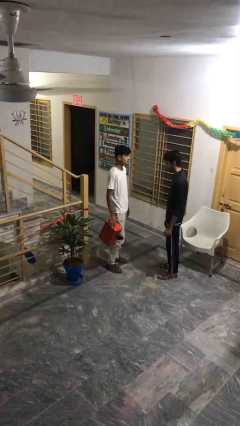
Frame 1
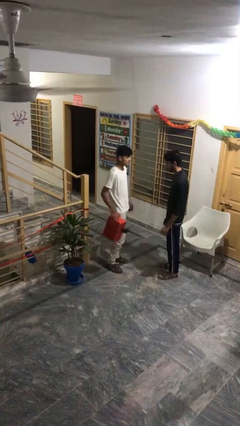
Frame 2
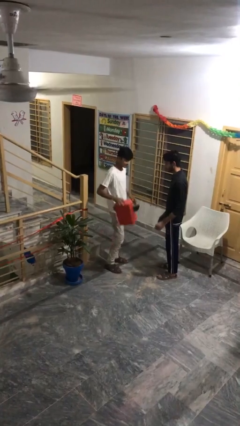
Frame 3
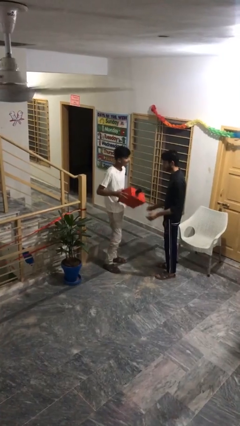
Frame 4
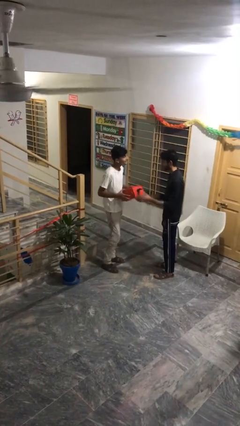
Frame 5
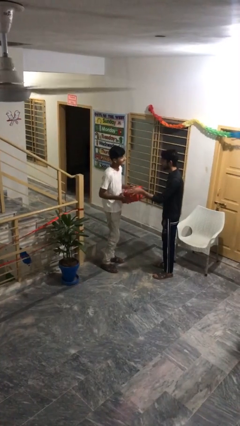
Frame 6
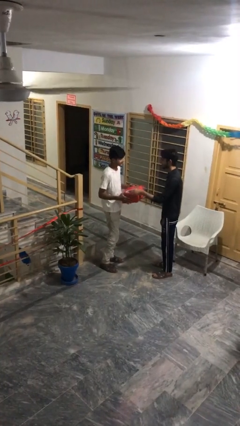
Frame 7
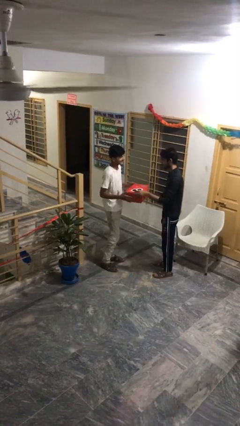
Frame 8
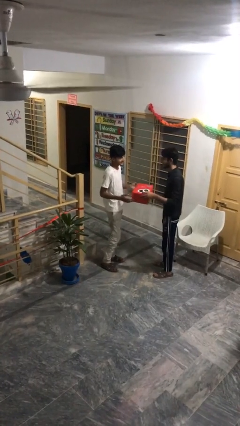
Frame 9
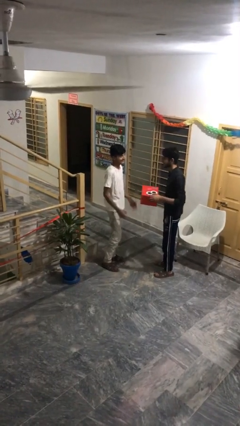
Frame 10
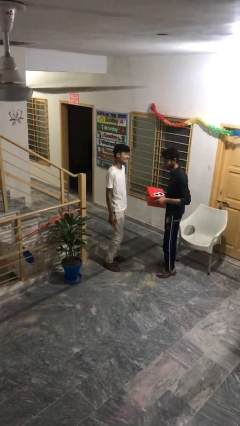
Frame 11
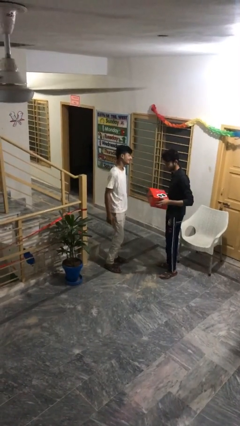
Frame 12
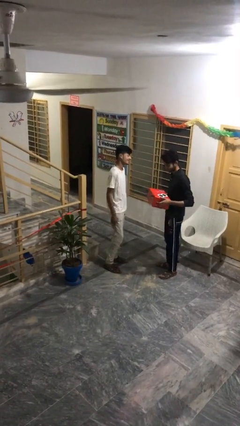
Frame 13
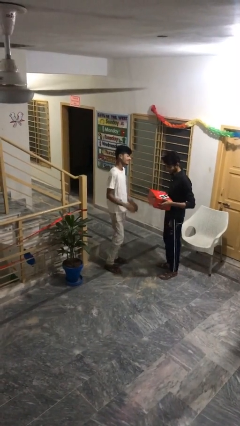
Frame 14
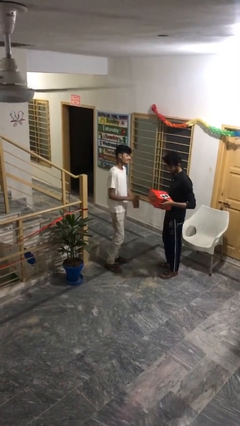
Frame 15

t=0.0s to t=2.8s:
person transfers object to person

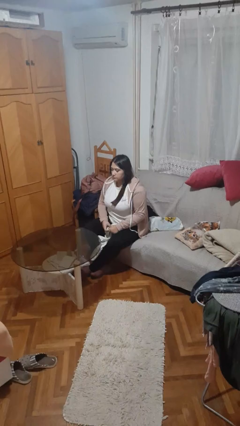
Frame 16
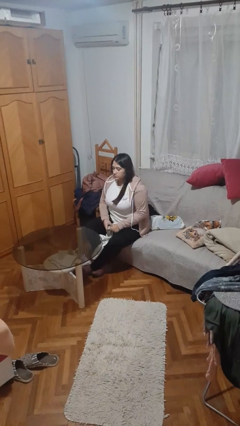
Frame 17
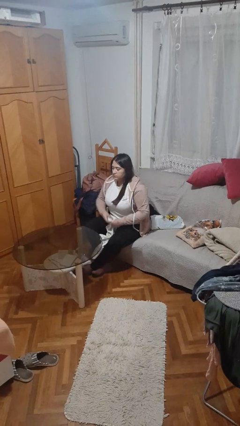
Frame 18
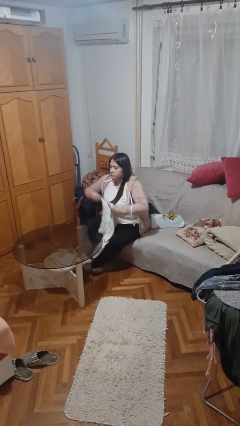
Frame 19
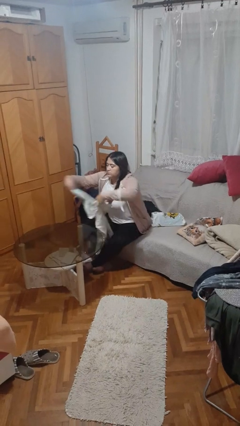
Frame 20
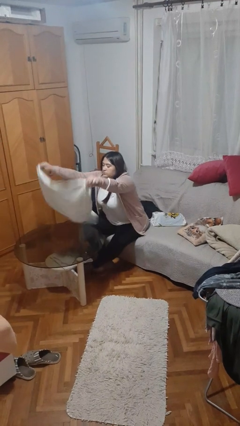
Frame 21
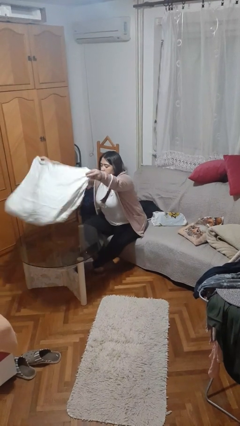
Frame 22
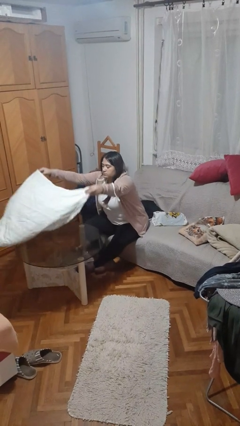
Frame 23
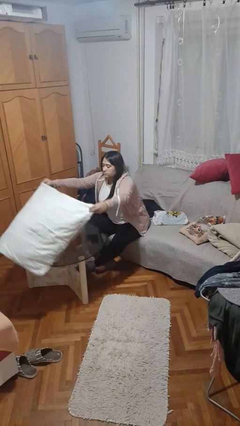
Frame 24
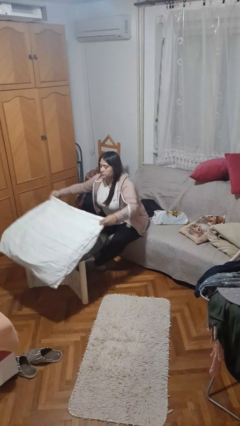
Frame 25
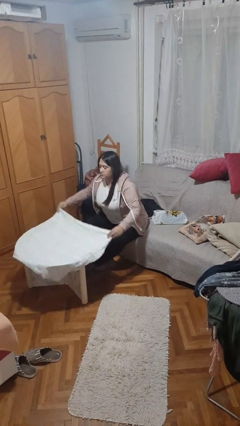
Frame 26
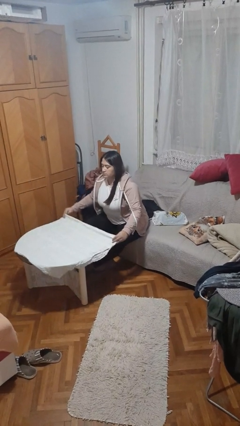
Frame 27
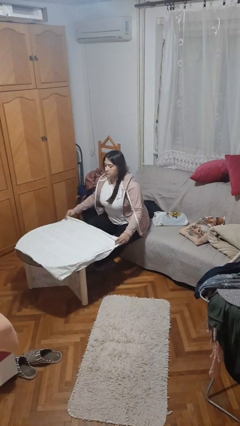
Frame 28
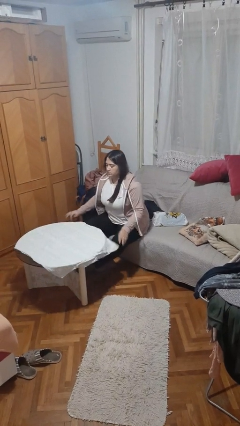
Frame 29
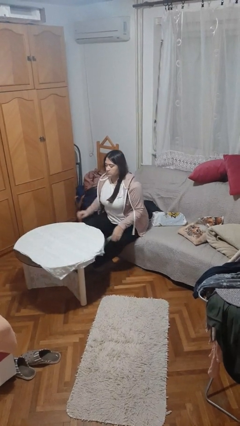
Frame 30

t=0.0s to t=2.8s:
person spreads tablecloth

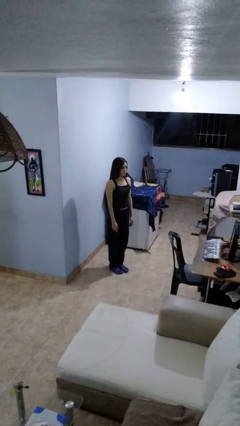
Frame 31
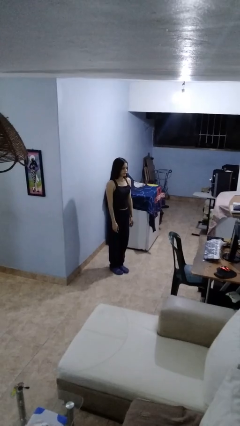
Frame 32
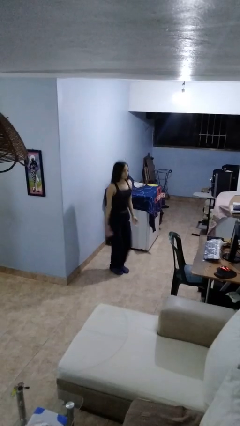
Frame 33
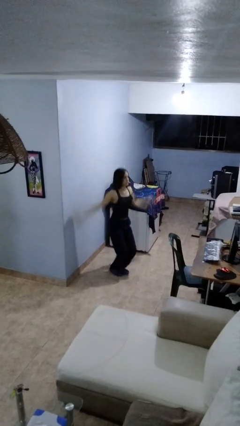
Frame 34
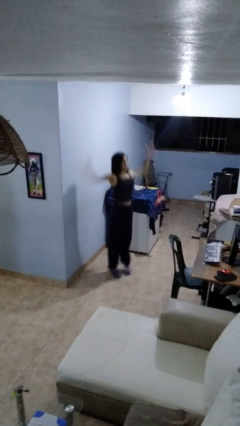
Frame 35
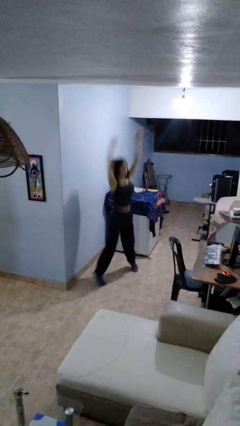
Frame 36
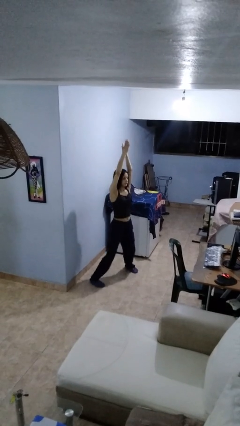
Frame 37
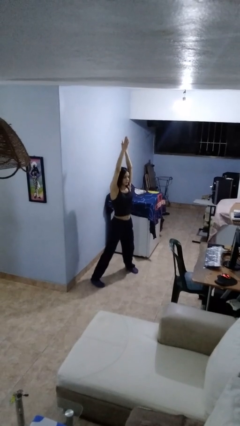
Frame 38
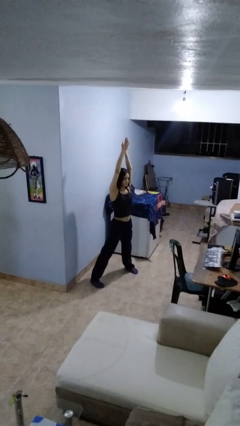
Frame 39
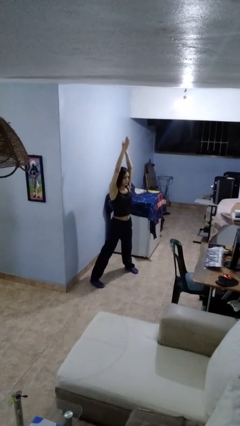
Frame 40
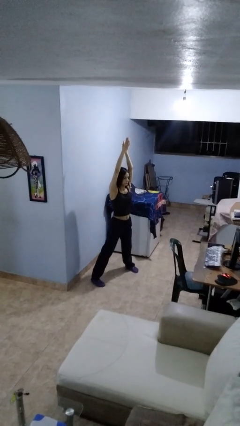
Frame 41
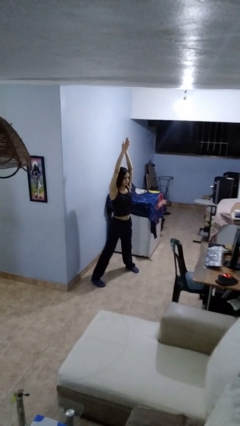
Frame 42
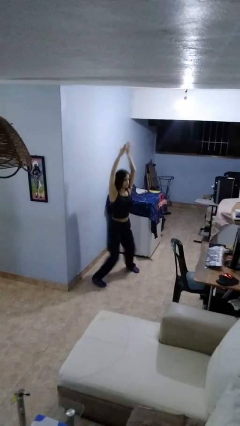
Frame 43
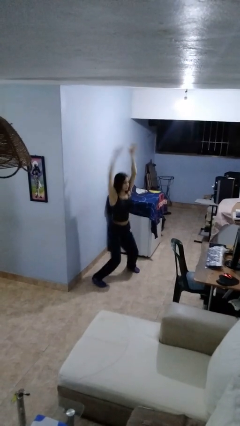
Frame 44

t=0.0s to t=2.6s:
person exercises with jumping jacks

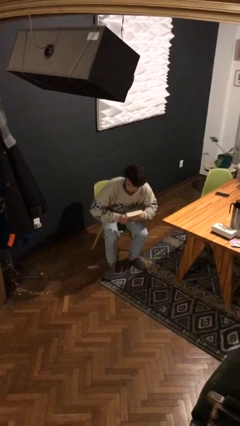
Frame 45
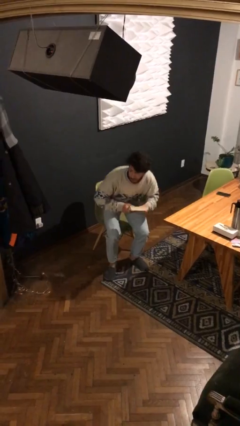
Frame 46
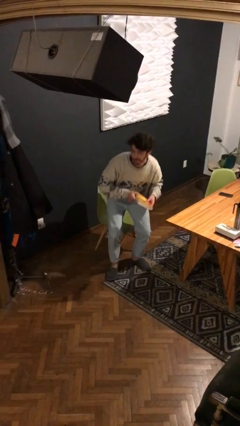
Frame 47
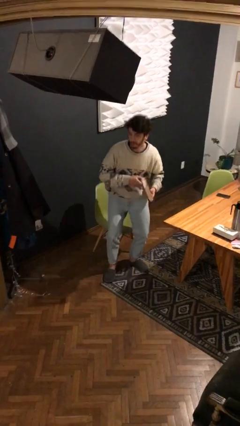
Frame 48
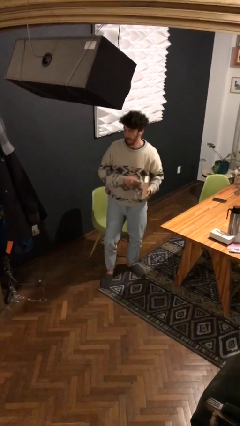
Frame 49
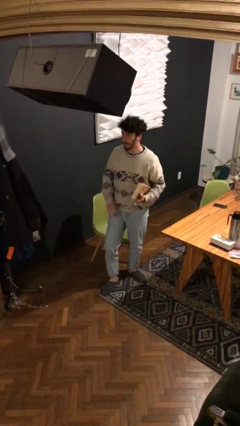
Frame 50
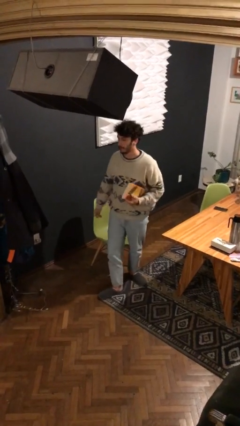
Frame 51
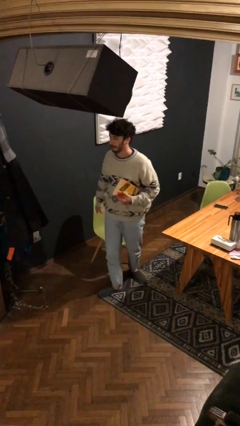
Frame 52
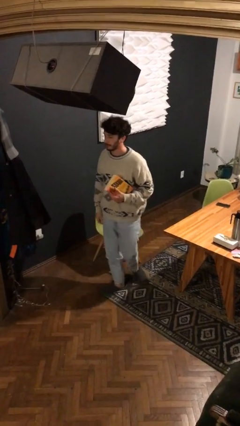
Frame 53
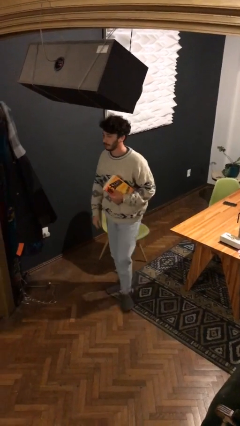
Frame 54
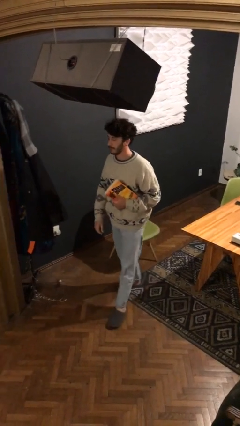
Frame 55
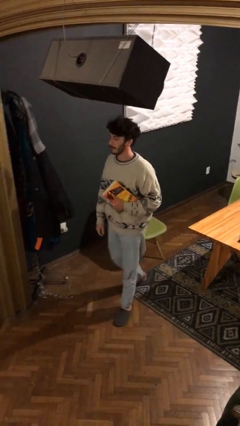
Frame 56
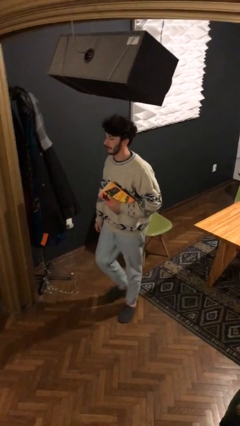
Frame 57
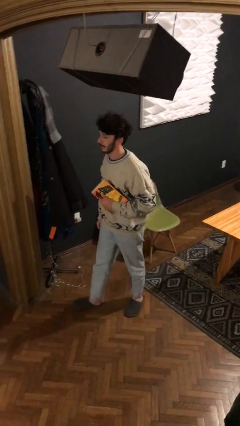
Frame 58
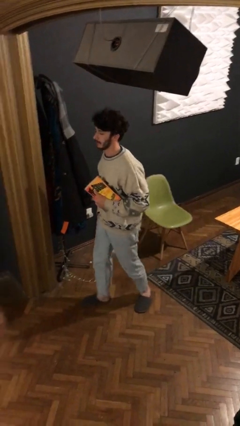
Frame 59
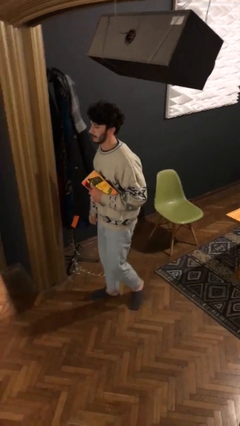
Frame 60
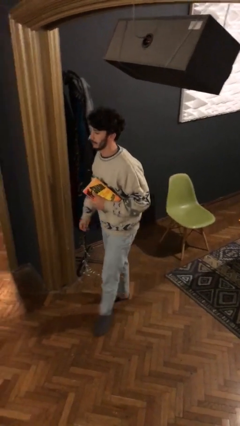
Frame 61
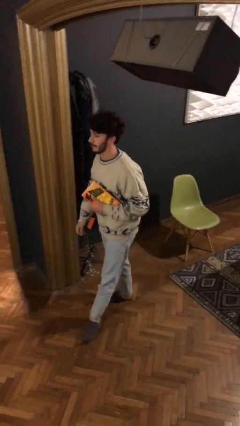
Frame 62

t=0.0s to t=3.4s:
person stands up

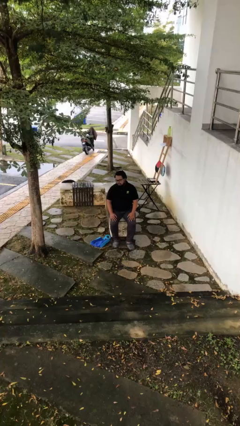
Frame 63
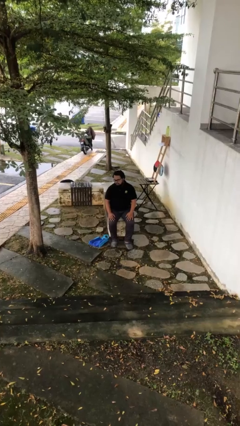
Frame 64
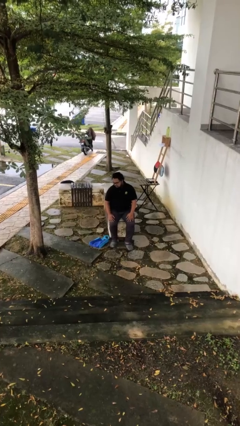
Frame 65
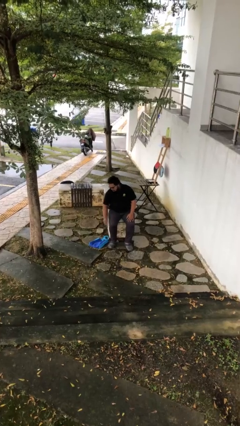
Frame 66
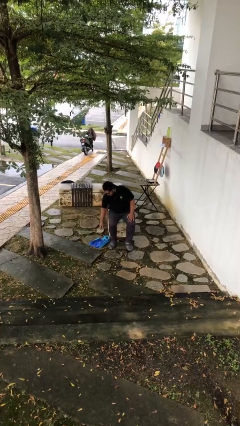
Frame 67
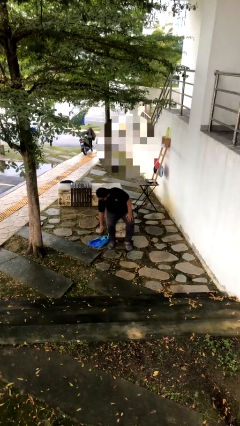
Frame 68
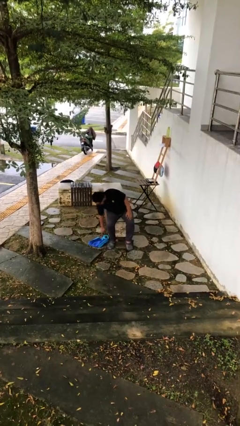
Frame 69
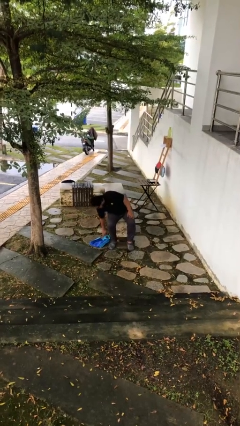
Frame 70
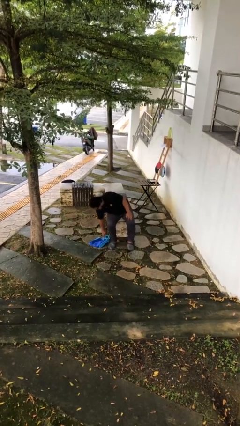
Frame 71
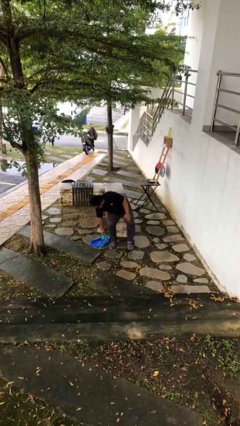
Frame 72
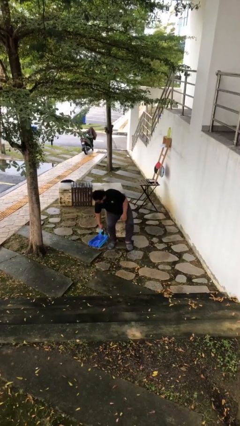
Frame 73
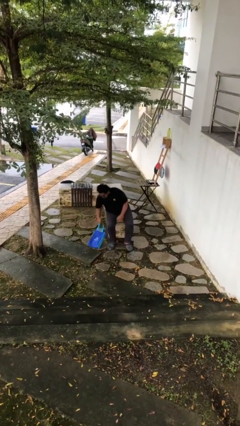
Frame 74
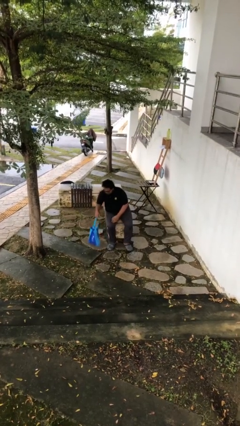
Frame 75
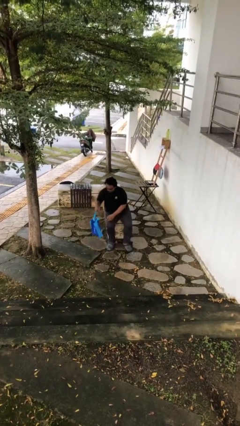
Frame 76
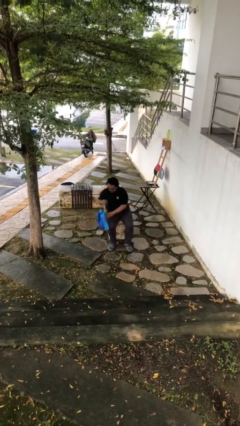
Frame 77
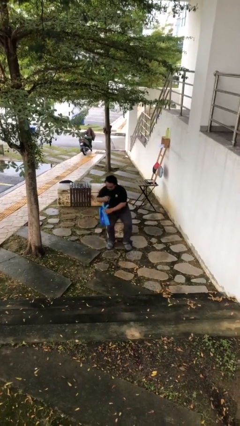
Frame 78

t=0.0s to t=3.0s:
person picks up object from floor

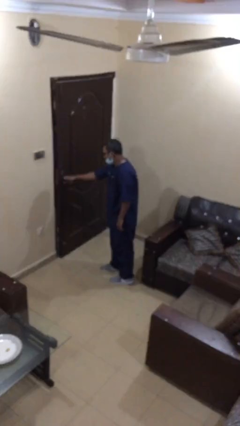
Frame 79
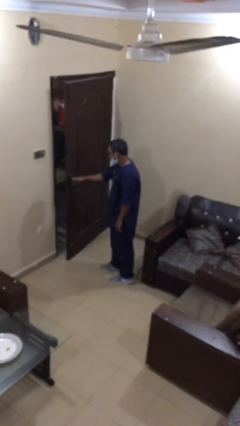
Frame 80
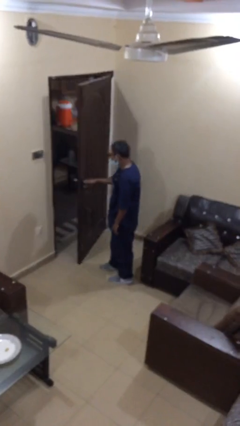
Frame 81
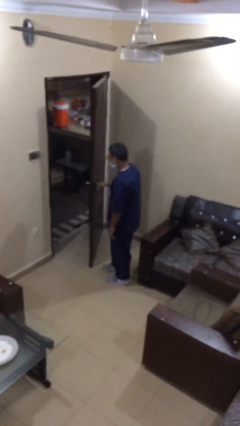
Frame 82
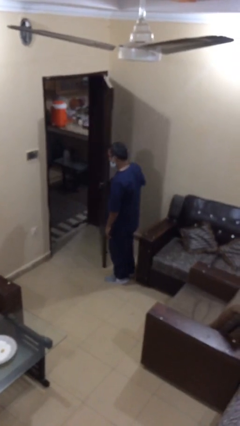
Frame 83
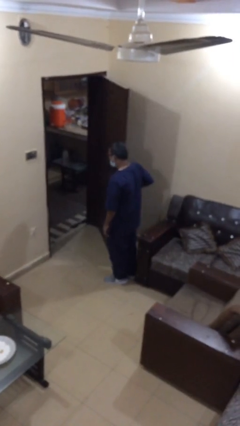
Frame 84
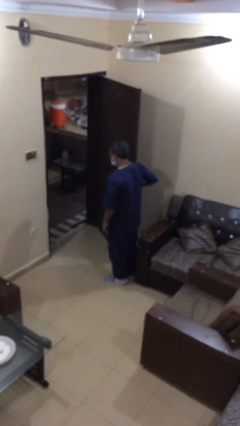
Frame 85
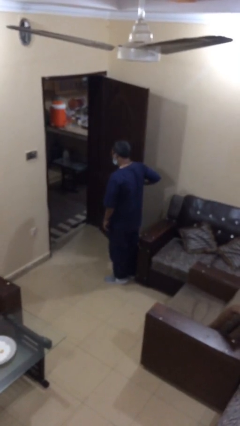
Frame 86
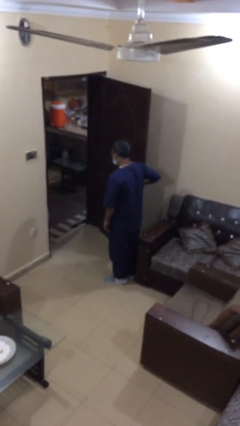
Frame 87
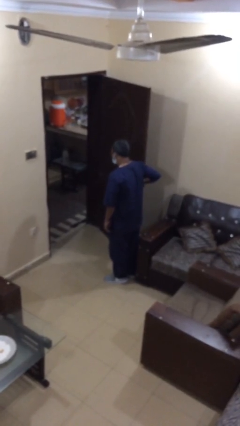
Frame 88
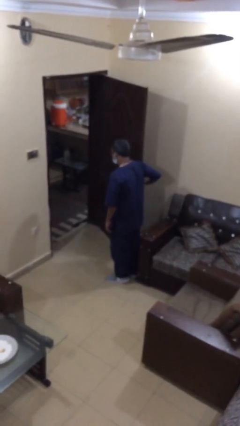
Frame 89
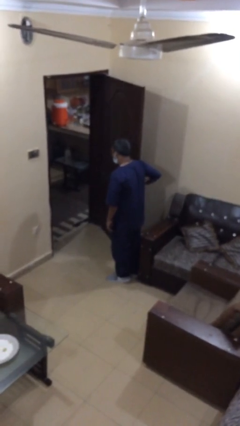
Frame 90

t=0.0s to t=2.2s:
person opens facility door

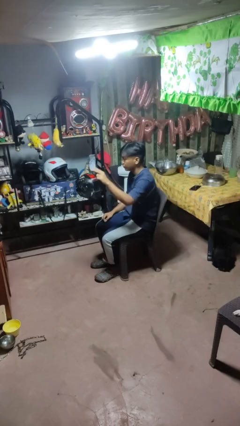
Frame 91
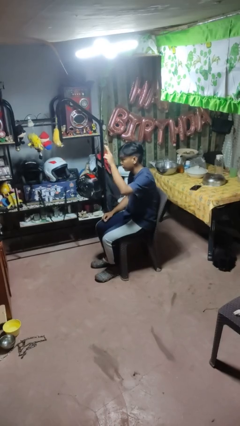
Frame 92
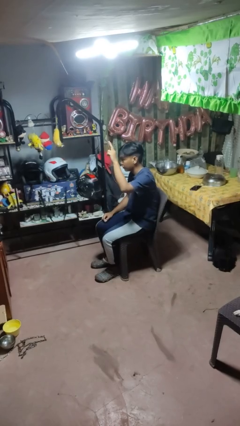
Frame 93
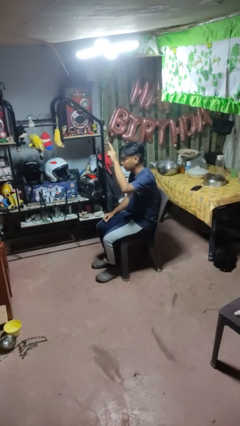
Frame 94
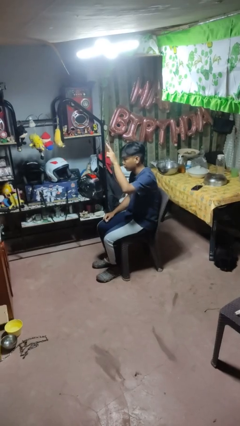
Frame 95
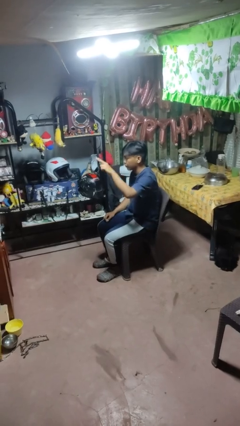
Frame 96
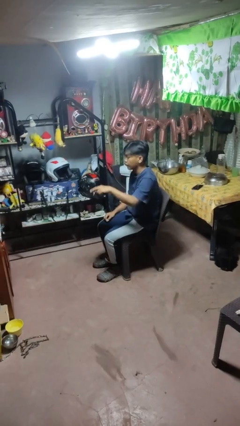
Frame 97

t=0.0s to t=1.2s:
person gestures peace
